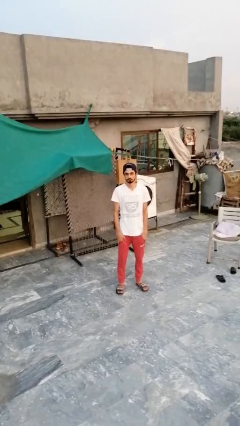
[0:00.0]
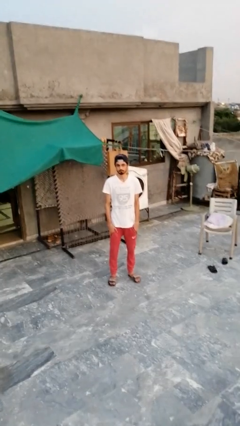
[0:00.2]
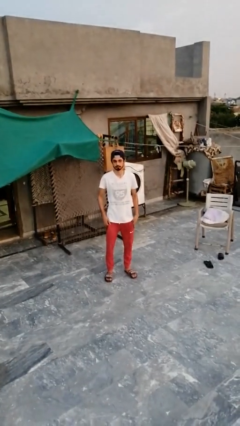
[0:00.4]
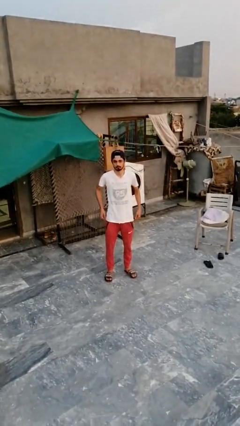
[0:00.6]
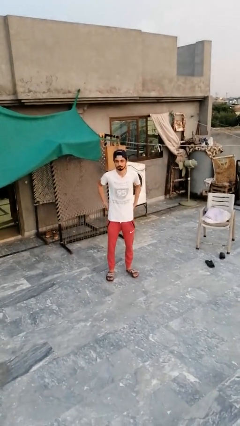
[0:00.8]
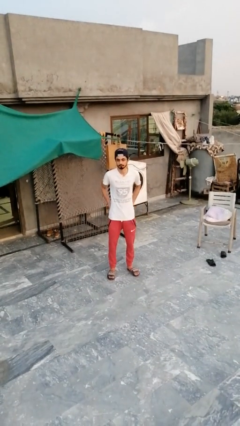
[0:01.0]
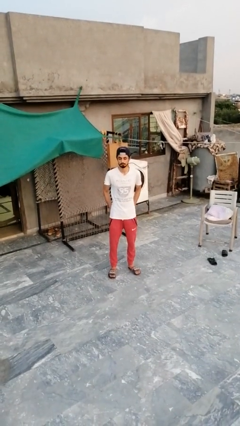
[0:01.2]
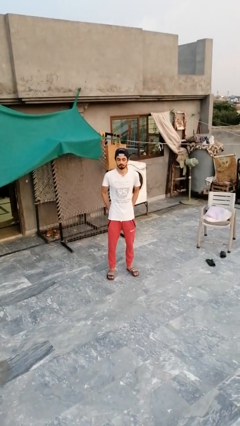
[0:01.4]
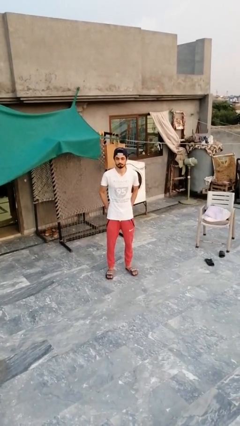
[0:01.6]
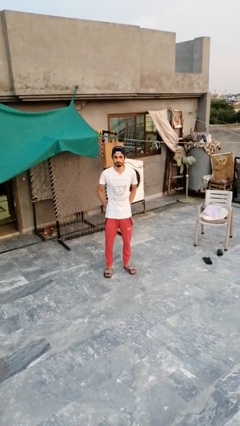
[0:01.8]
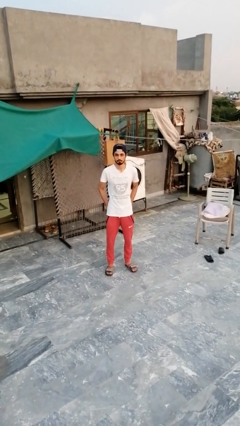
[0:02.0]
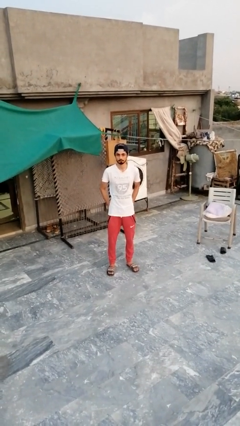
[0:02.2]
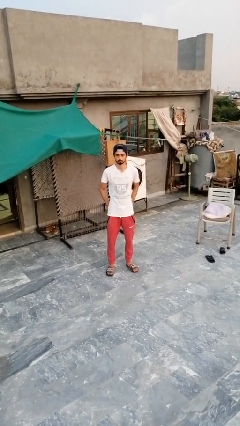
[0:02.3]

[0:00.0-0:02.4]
person puts hands in back pockets

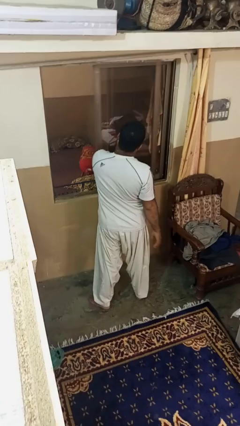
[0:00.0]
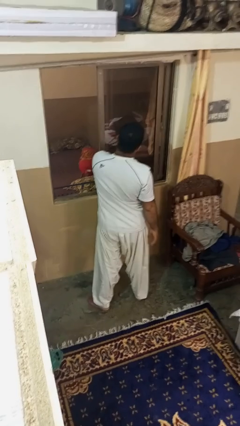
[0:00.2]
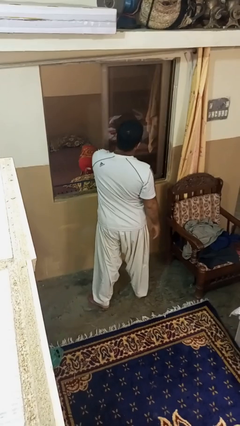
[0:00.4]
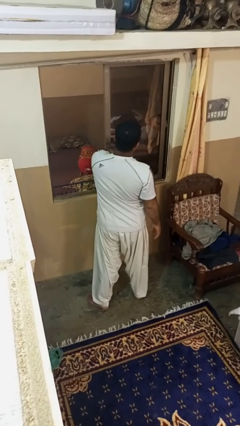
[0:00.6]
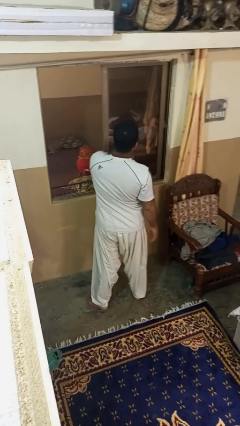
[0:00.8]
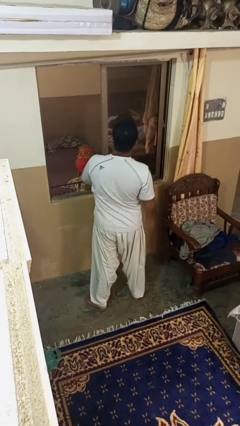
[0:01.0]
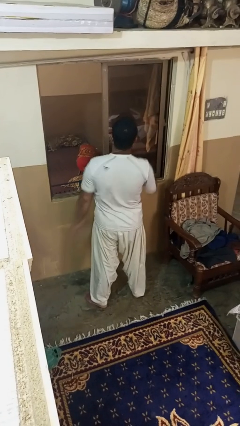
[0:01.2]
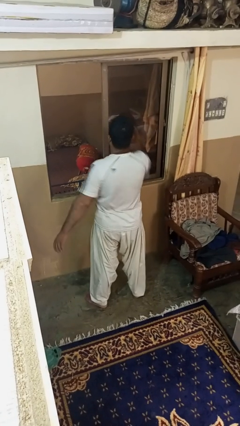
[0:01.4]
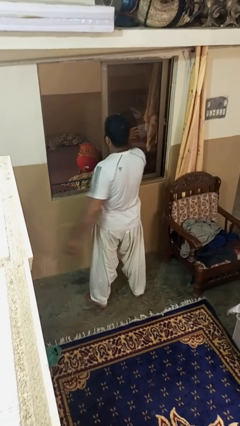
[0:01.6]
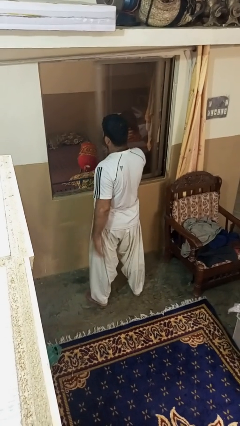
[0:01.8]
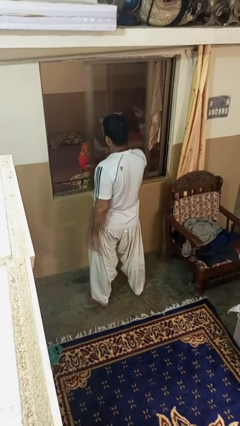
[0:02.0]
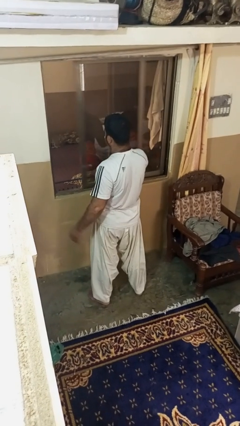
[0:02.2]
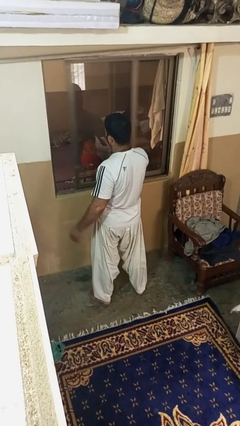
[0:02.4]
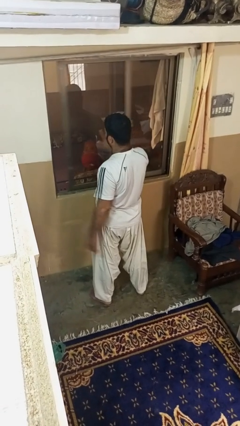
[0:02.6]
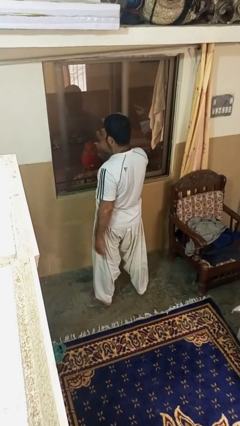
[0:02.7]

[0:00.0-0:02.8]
person closes home window

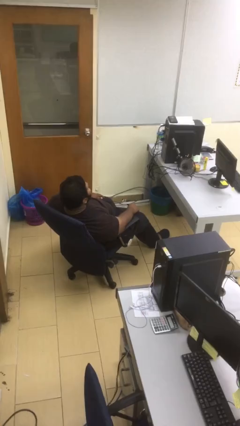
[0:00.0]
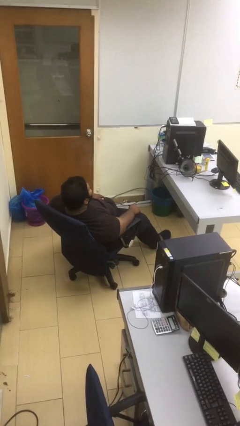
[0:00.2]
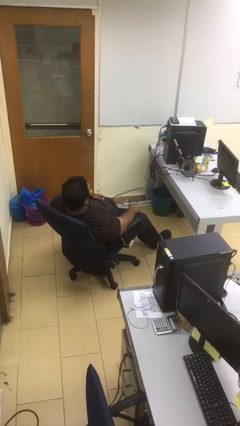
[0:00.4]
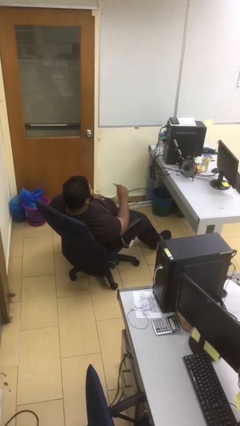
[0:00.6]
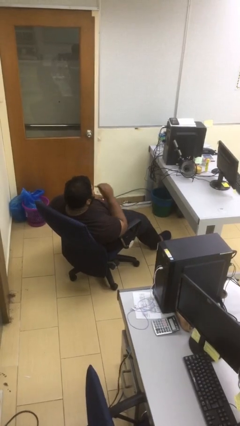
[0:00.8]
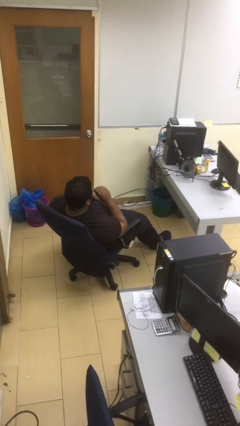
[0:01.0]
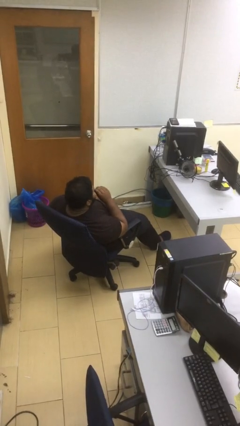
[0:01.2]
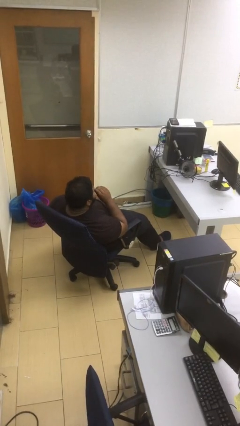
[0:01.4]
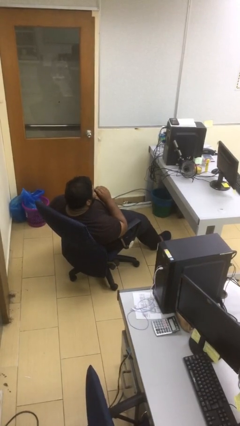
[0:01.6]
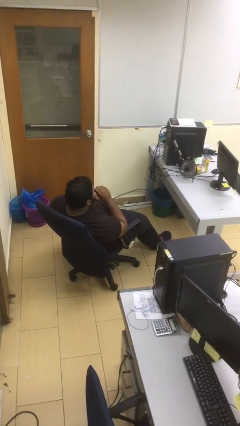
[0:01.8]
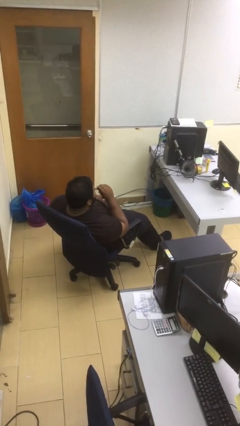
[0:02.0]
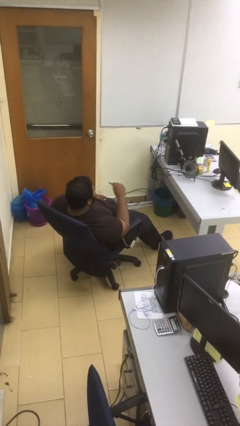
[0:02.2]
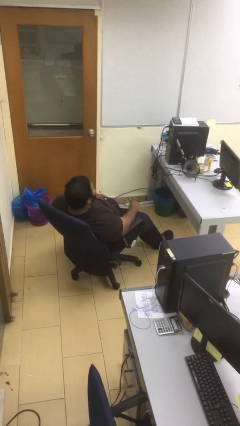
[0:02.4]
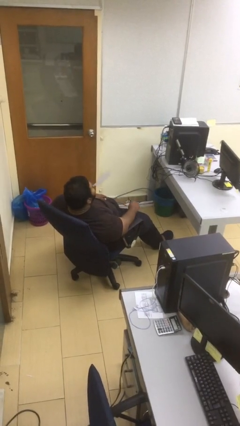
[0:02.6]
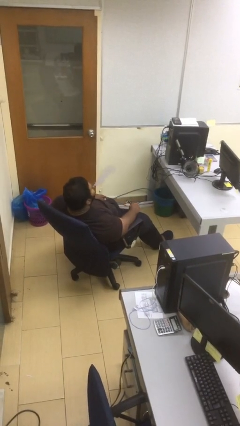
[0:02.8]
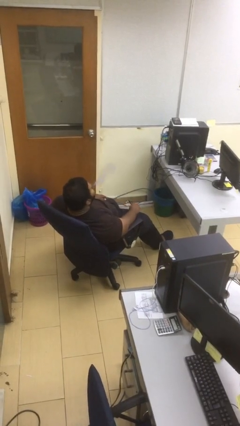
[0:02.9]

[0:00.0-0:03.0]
person vapes

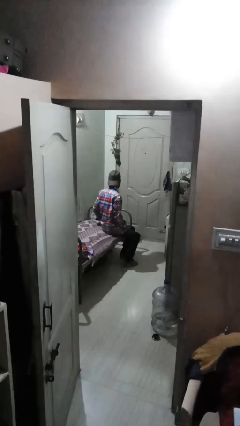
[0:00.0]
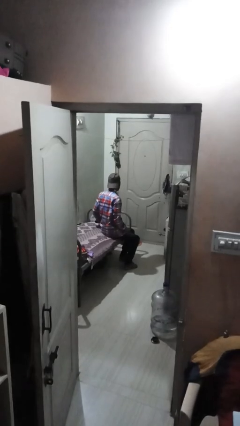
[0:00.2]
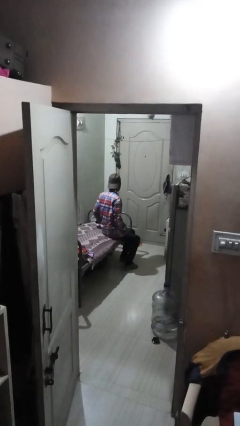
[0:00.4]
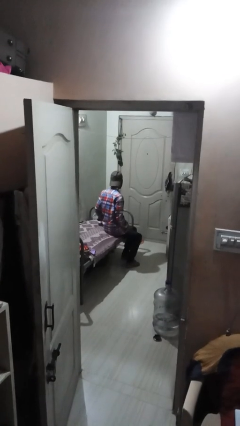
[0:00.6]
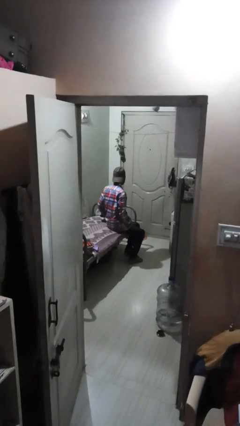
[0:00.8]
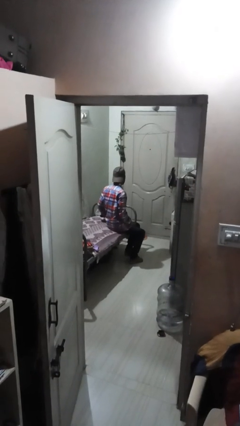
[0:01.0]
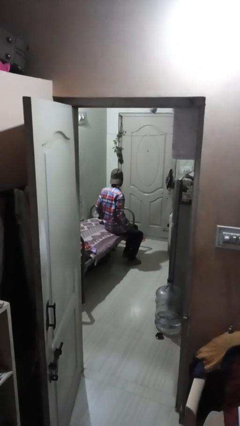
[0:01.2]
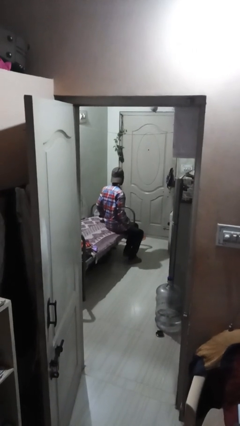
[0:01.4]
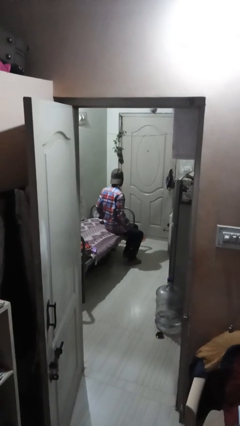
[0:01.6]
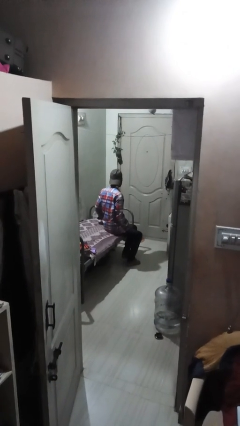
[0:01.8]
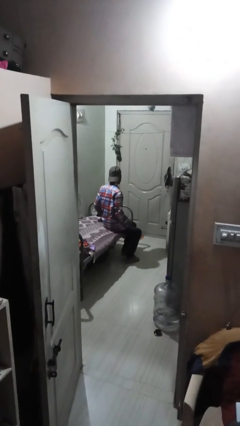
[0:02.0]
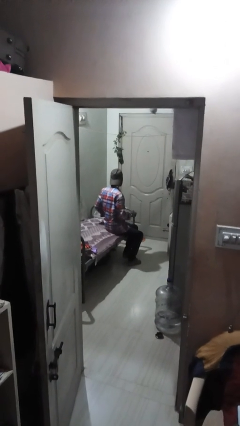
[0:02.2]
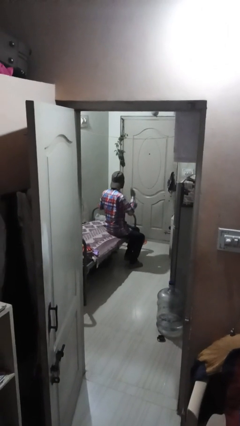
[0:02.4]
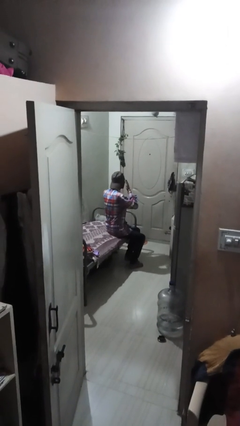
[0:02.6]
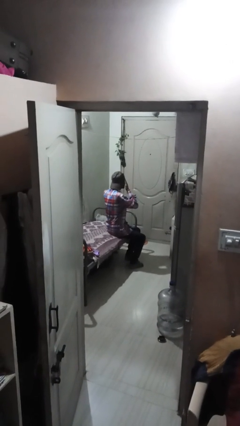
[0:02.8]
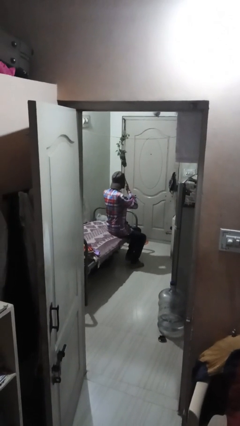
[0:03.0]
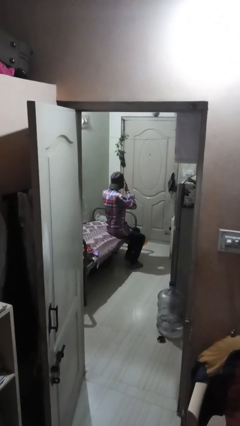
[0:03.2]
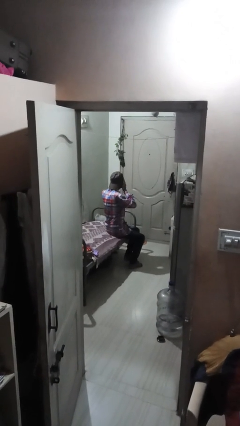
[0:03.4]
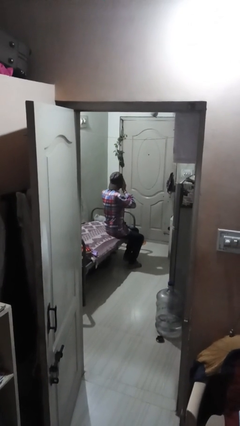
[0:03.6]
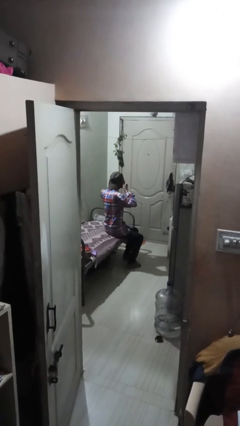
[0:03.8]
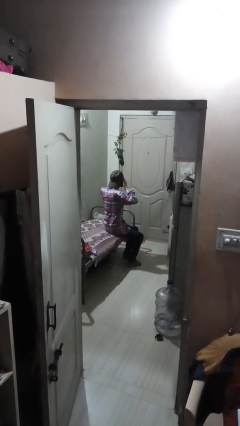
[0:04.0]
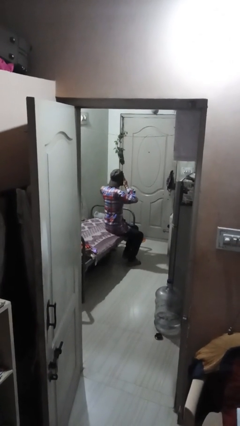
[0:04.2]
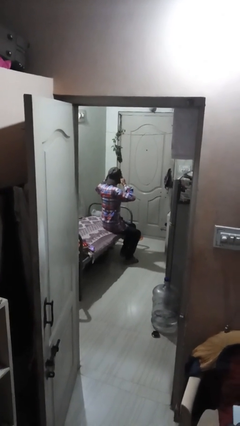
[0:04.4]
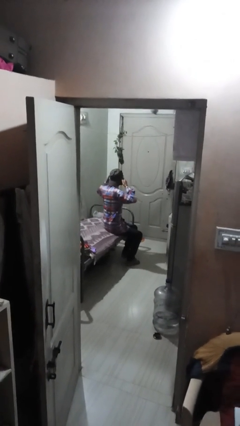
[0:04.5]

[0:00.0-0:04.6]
person rubs eyes

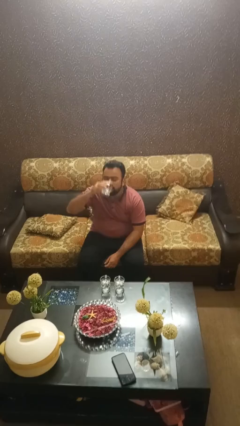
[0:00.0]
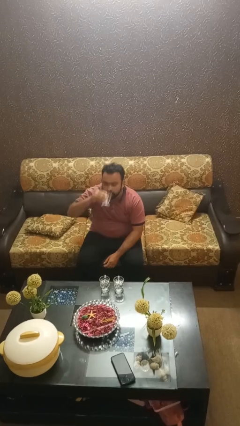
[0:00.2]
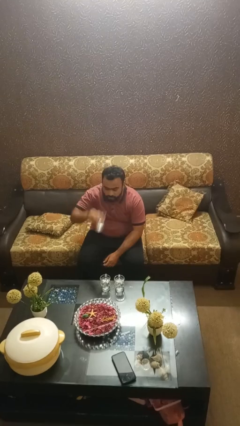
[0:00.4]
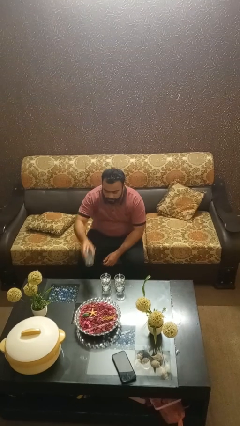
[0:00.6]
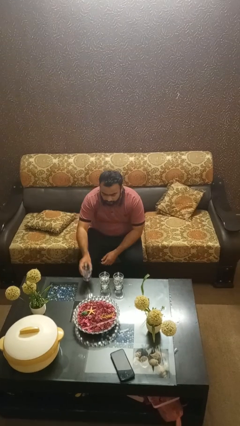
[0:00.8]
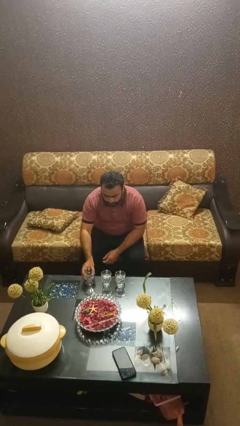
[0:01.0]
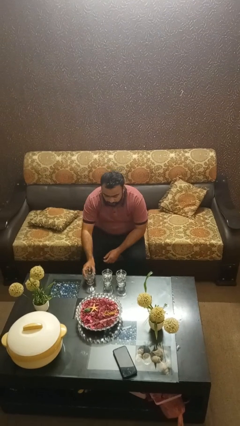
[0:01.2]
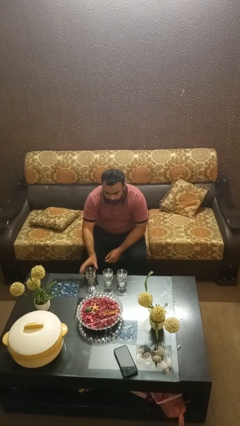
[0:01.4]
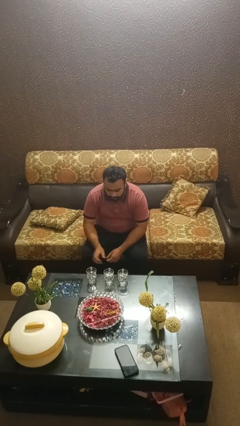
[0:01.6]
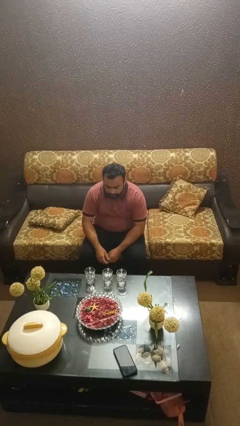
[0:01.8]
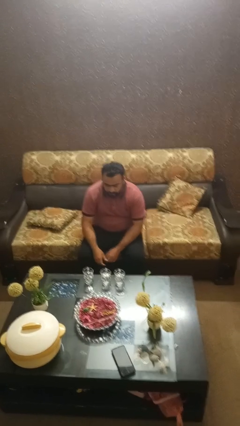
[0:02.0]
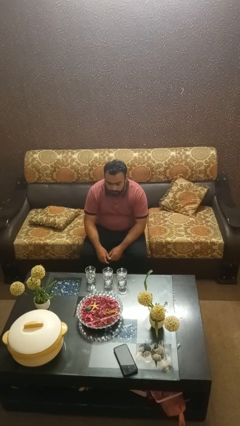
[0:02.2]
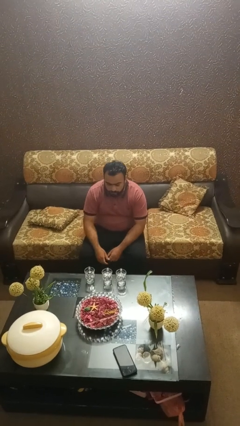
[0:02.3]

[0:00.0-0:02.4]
person puts down object on table

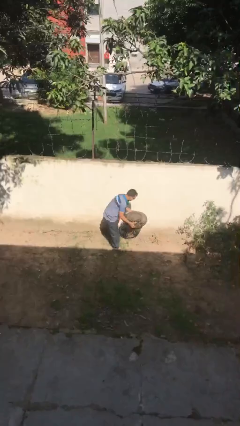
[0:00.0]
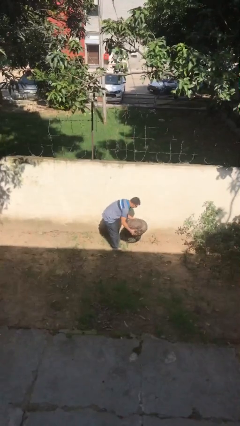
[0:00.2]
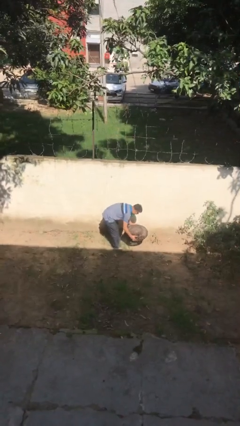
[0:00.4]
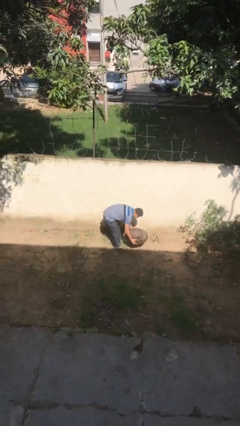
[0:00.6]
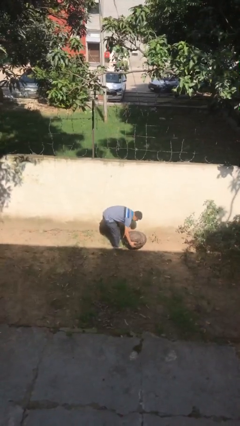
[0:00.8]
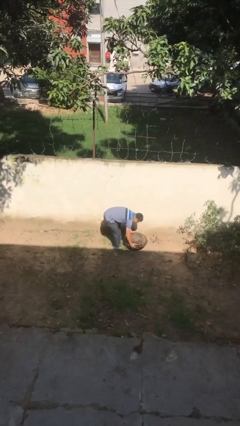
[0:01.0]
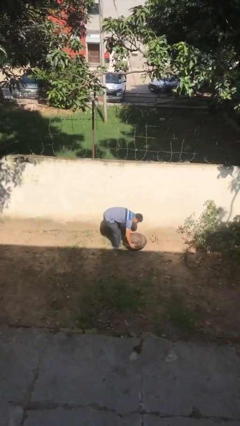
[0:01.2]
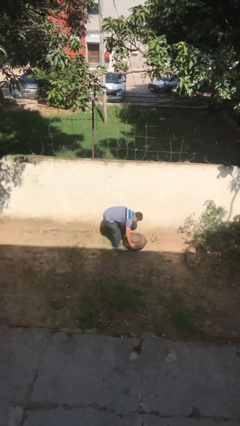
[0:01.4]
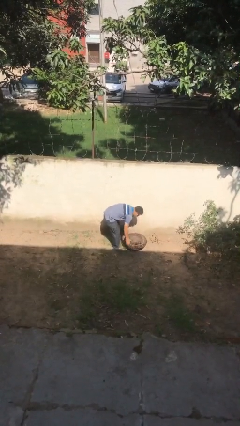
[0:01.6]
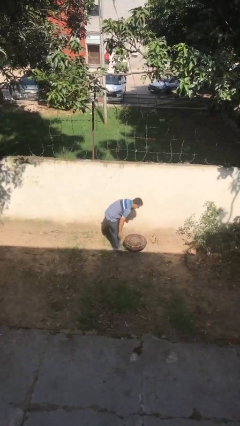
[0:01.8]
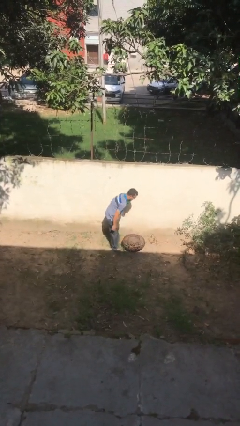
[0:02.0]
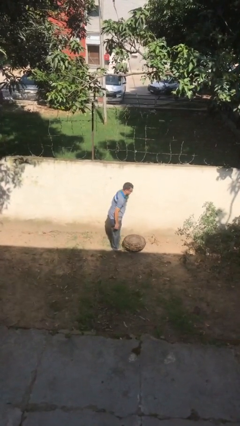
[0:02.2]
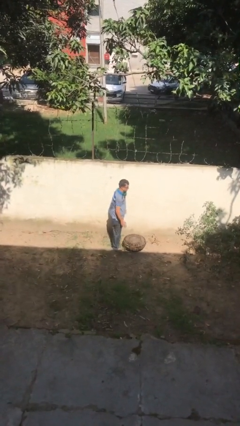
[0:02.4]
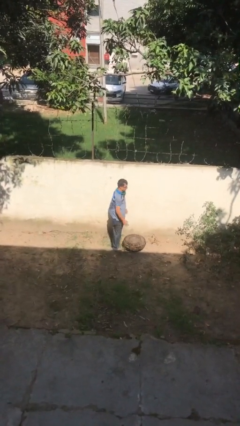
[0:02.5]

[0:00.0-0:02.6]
person puts down object on floor
